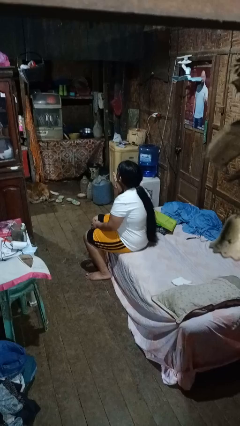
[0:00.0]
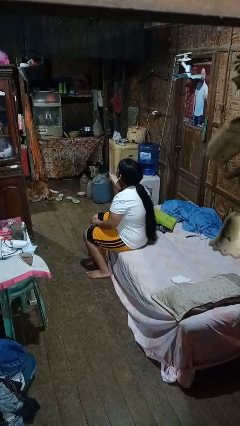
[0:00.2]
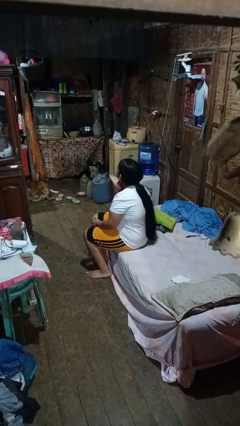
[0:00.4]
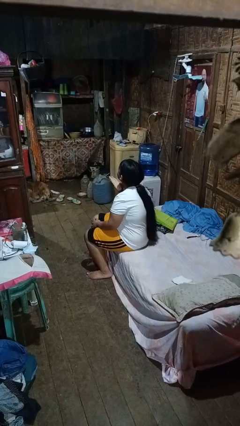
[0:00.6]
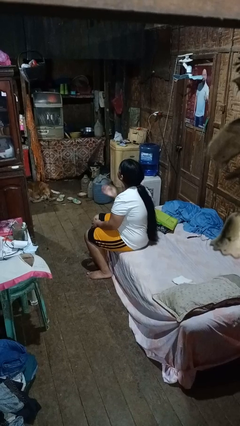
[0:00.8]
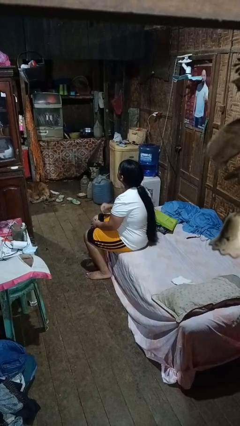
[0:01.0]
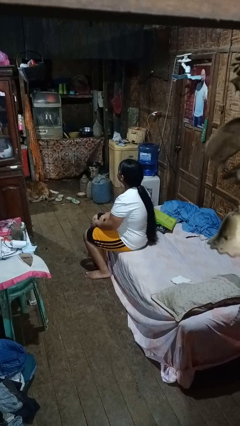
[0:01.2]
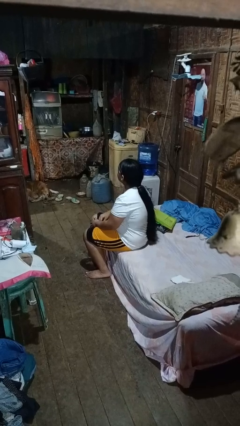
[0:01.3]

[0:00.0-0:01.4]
person gestures blow kiss

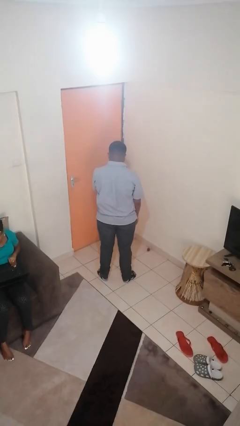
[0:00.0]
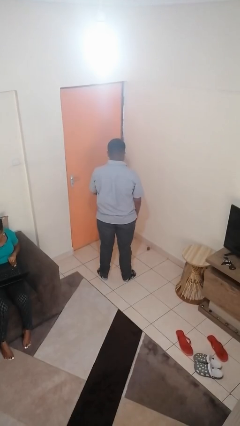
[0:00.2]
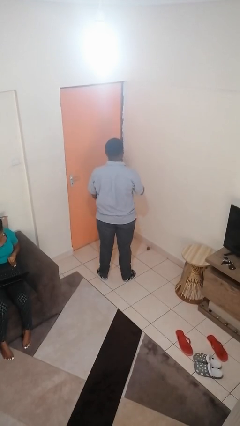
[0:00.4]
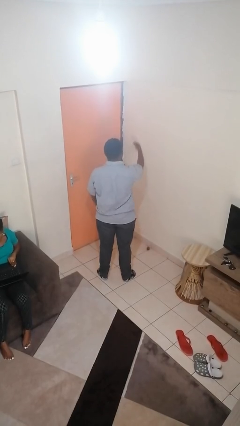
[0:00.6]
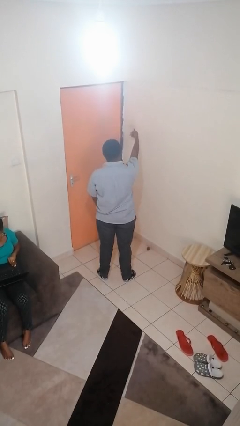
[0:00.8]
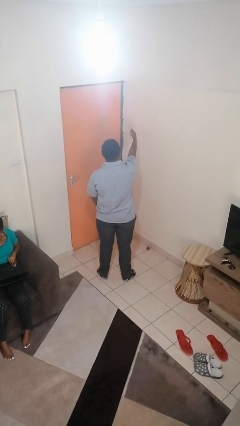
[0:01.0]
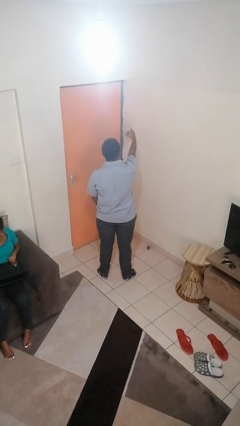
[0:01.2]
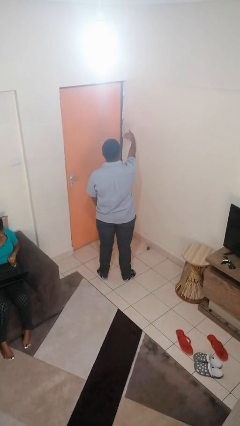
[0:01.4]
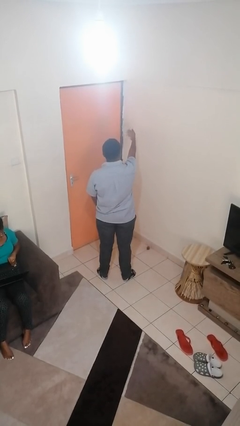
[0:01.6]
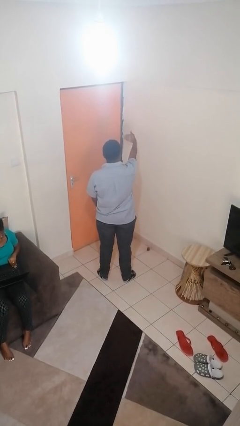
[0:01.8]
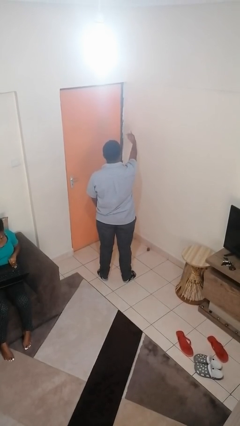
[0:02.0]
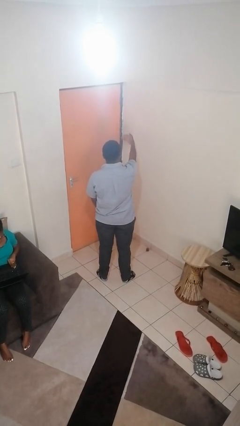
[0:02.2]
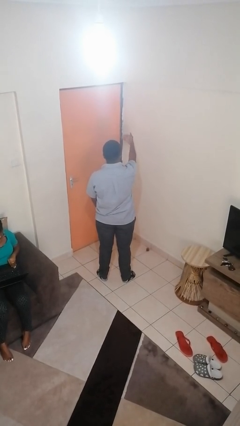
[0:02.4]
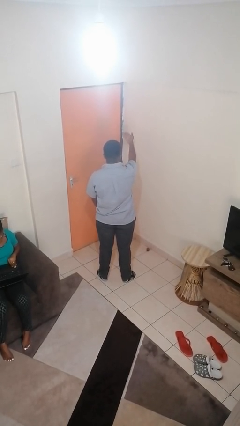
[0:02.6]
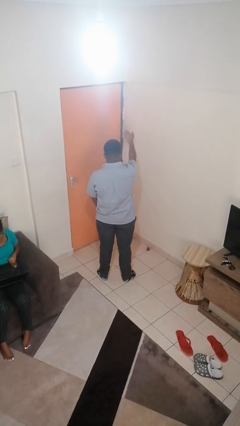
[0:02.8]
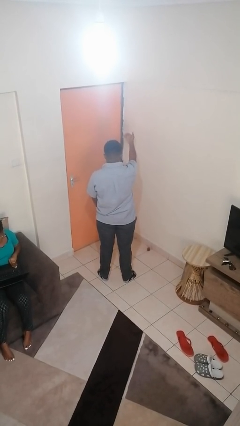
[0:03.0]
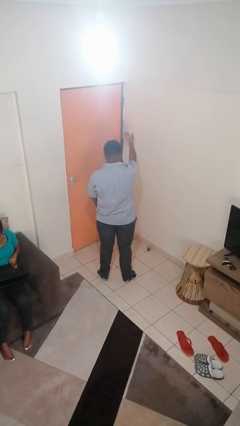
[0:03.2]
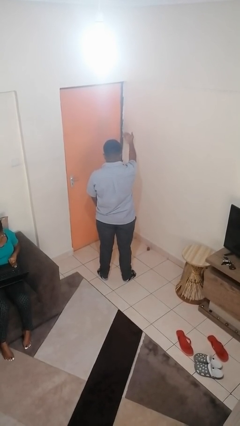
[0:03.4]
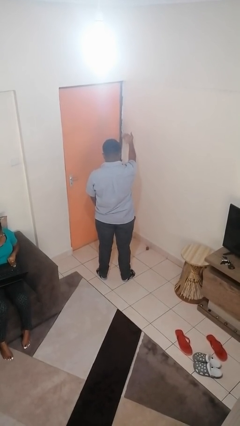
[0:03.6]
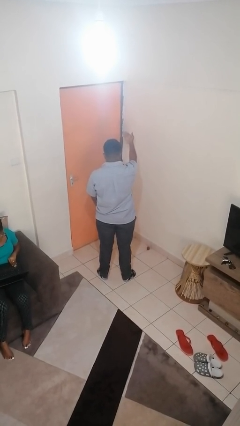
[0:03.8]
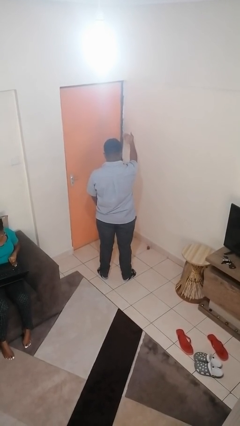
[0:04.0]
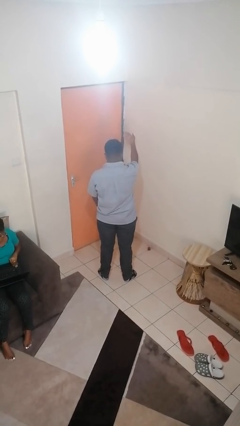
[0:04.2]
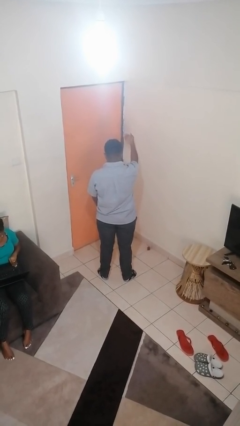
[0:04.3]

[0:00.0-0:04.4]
person gestures come here

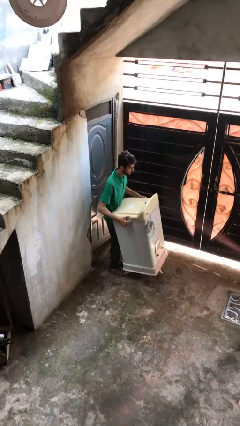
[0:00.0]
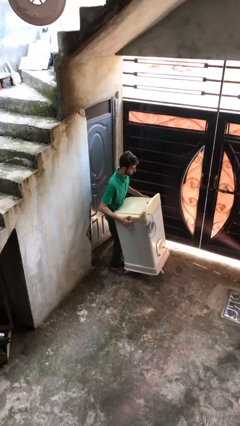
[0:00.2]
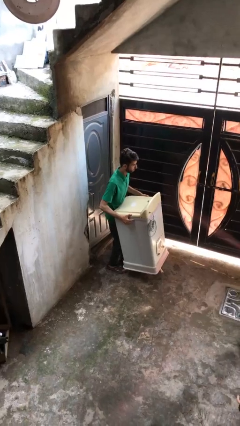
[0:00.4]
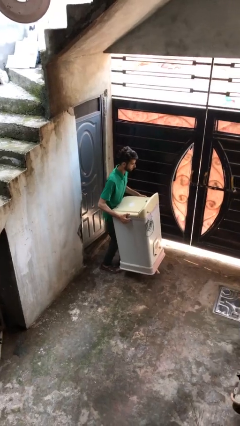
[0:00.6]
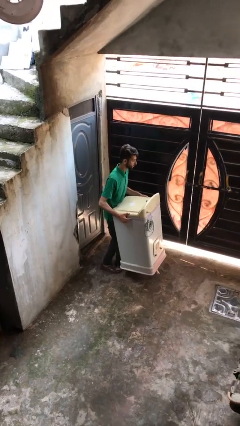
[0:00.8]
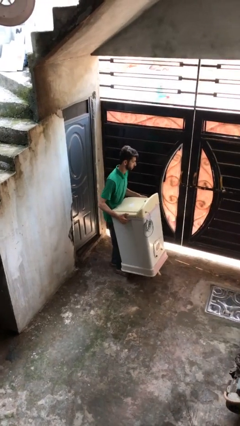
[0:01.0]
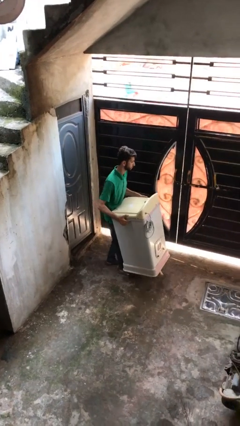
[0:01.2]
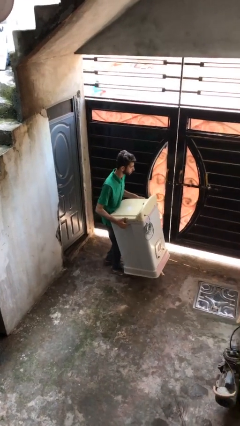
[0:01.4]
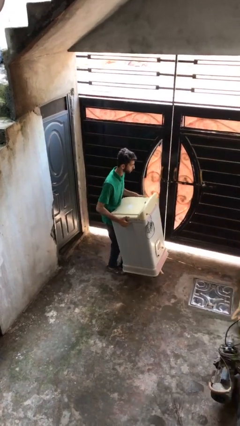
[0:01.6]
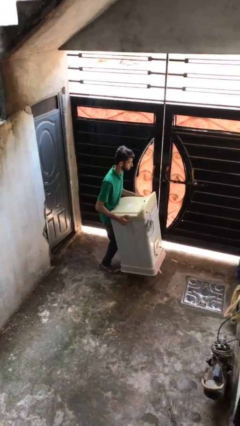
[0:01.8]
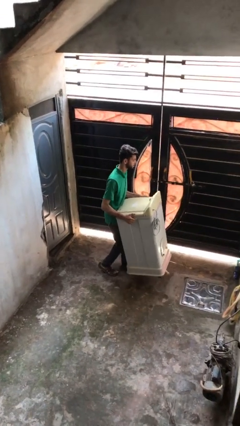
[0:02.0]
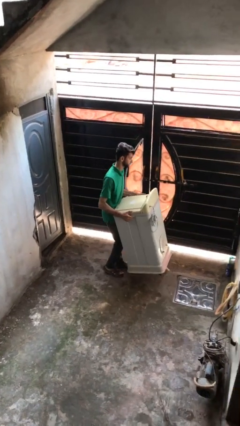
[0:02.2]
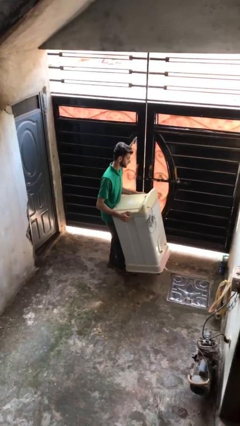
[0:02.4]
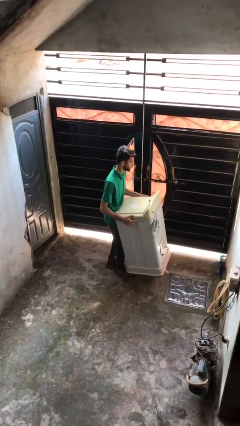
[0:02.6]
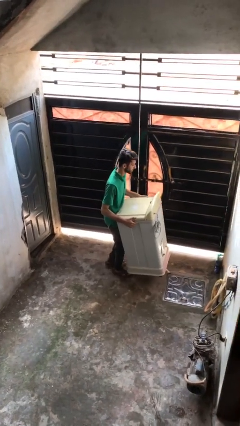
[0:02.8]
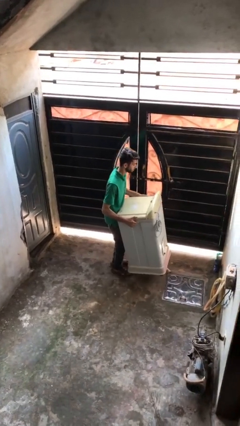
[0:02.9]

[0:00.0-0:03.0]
person carries heavy object

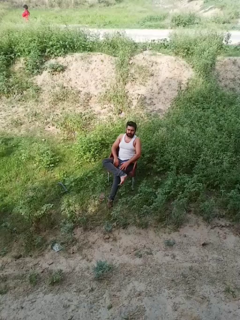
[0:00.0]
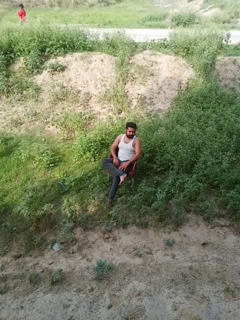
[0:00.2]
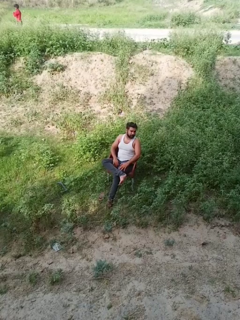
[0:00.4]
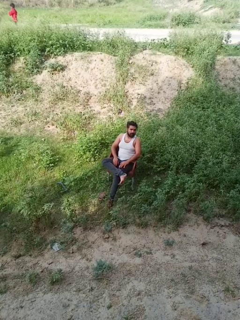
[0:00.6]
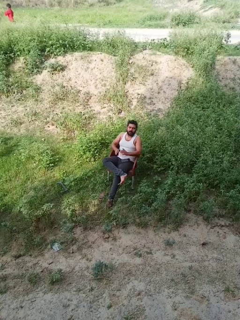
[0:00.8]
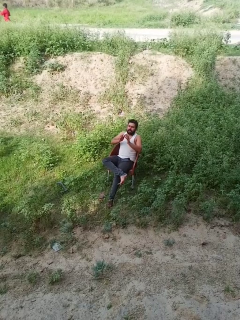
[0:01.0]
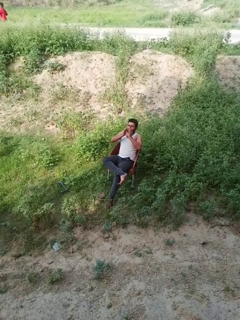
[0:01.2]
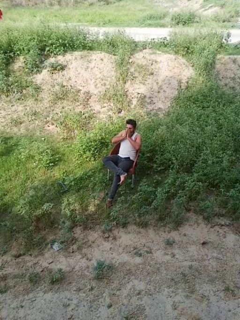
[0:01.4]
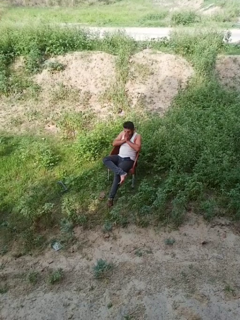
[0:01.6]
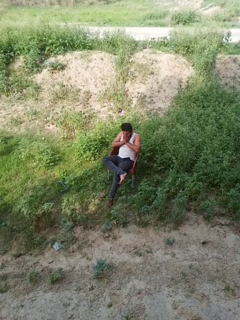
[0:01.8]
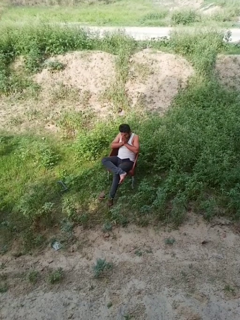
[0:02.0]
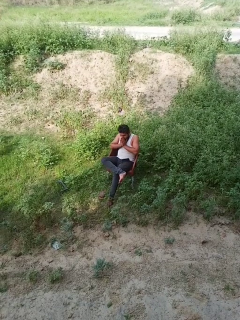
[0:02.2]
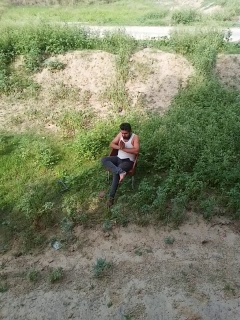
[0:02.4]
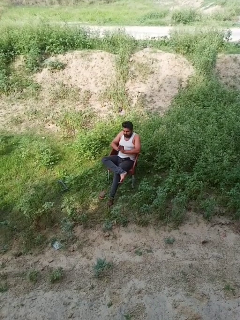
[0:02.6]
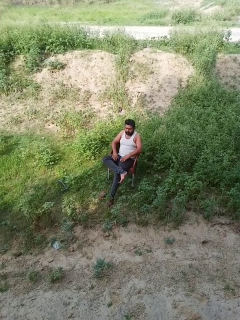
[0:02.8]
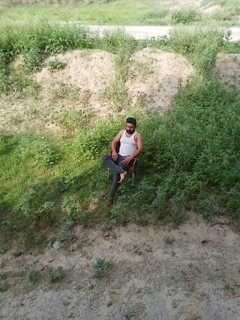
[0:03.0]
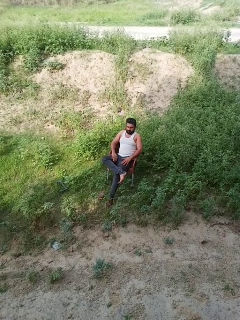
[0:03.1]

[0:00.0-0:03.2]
person sneezes into hand

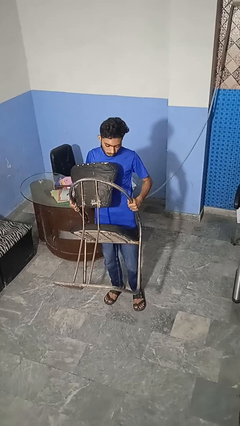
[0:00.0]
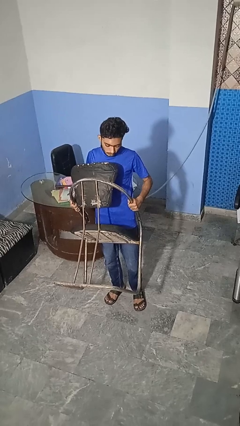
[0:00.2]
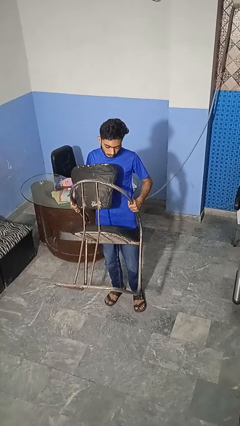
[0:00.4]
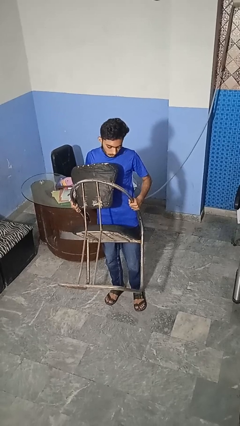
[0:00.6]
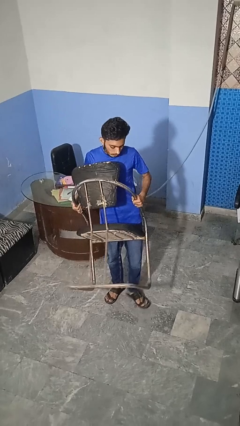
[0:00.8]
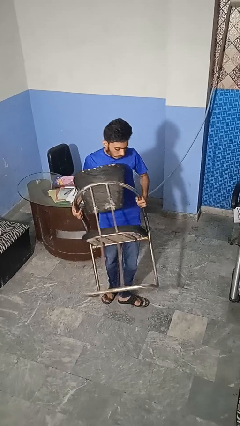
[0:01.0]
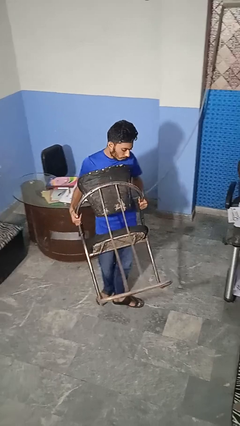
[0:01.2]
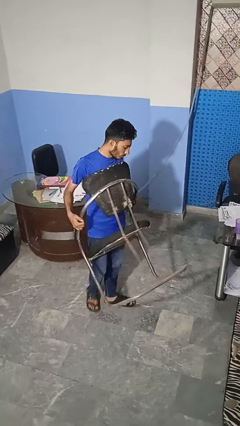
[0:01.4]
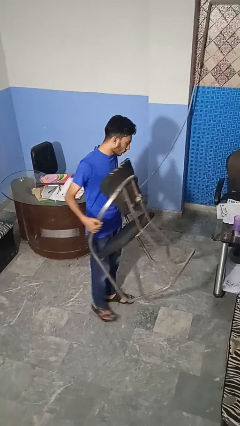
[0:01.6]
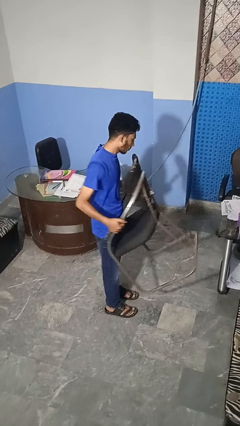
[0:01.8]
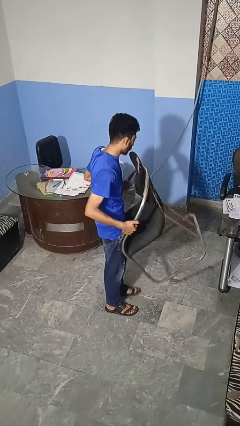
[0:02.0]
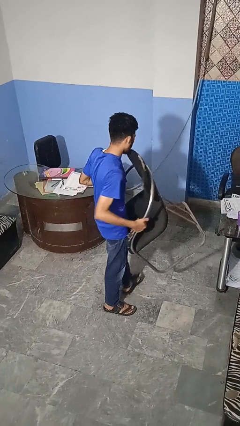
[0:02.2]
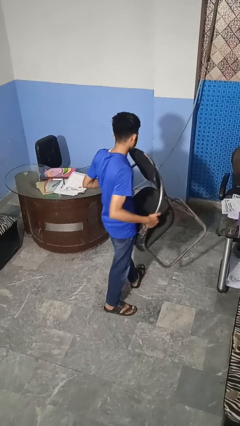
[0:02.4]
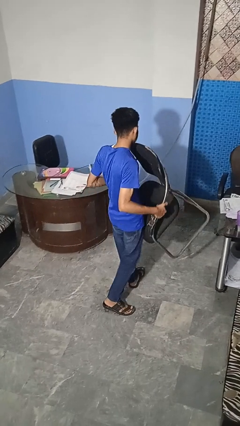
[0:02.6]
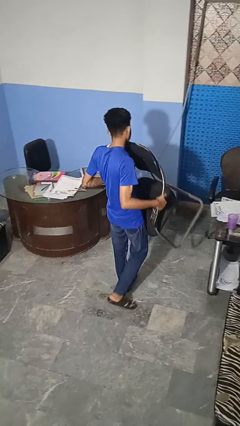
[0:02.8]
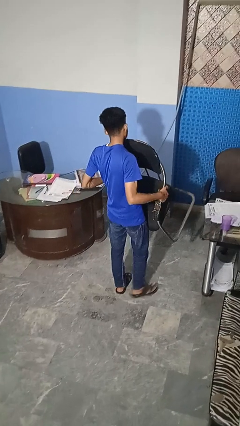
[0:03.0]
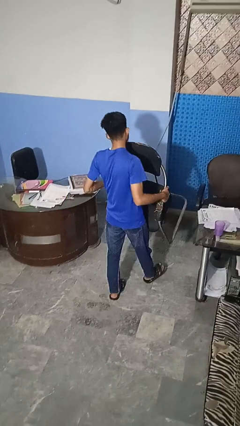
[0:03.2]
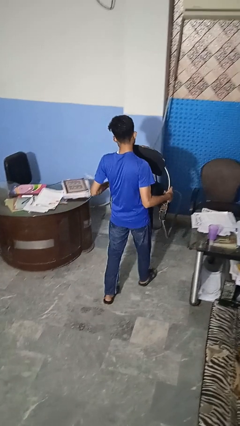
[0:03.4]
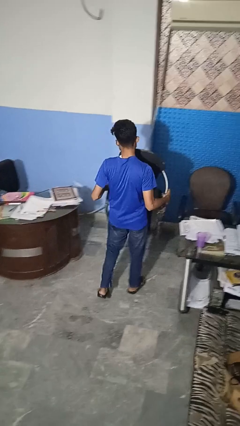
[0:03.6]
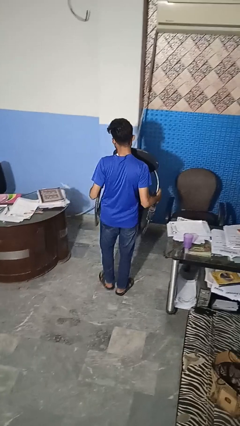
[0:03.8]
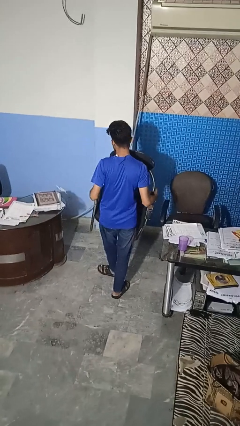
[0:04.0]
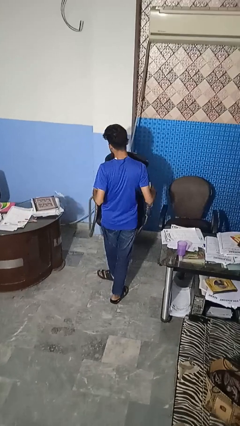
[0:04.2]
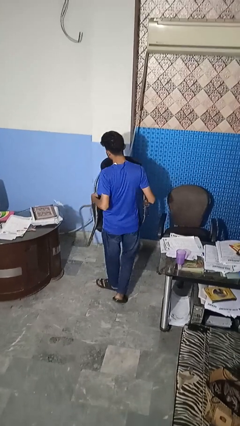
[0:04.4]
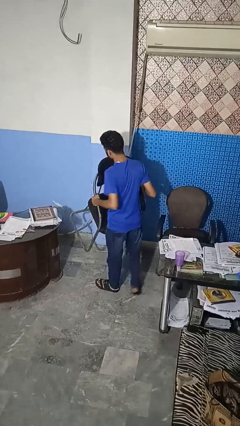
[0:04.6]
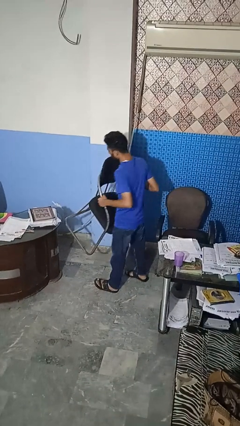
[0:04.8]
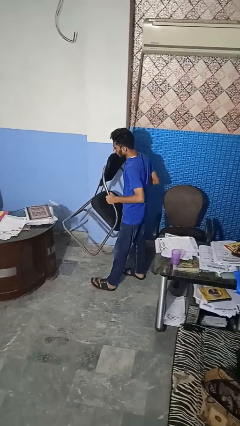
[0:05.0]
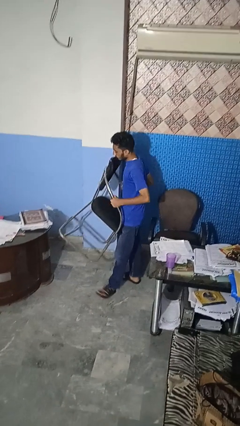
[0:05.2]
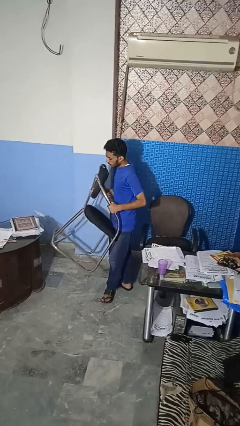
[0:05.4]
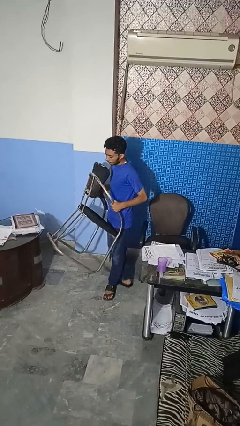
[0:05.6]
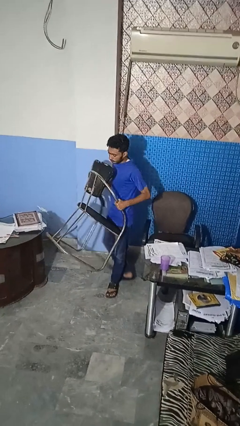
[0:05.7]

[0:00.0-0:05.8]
person carries furniture

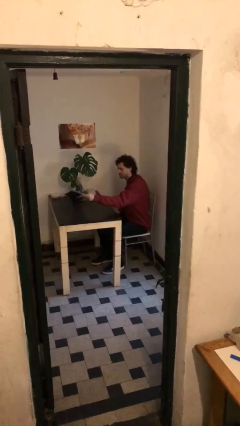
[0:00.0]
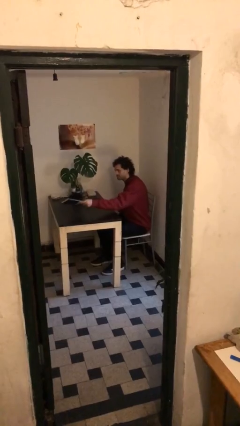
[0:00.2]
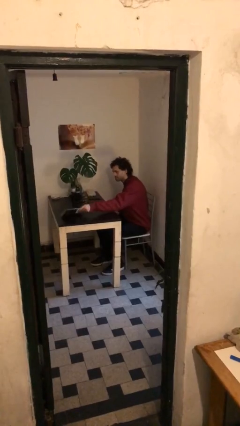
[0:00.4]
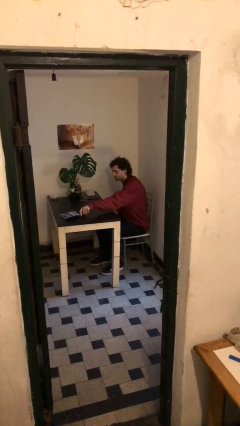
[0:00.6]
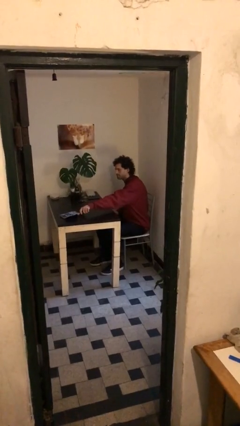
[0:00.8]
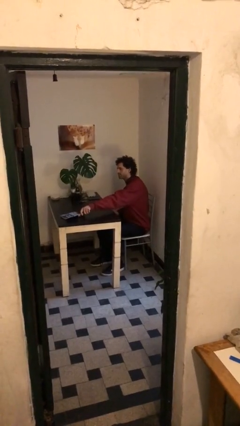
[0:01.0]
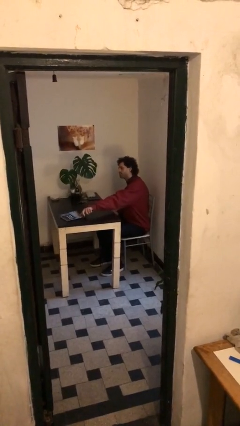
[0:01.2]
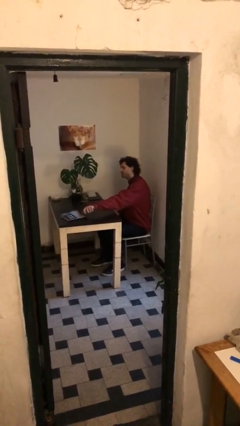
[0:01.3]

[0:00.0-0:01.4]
person puts down object on table
